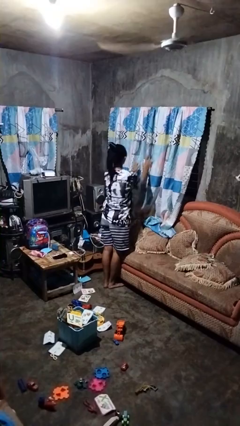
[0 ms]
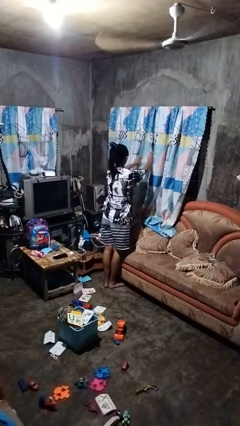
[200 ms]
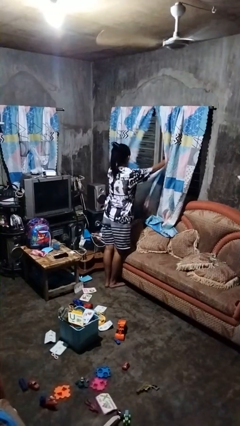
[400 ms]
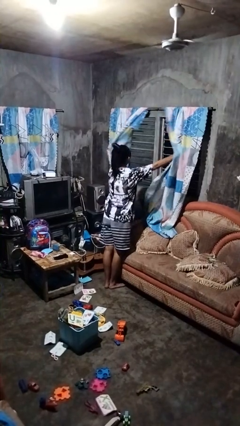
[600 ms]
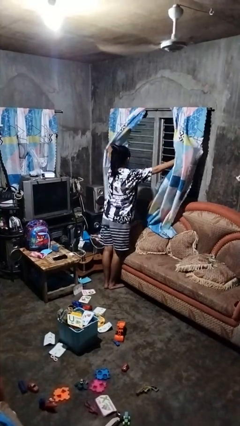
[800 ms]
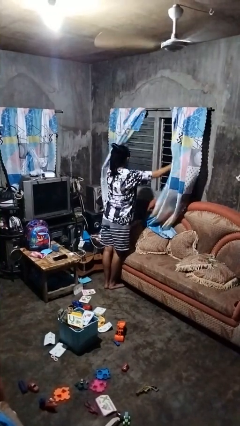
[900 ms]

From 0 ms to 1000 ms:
person opens curtains

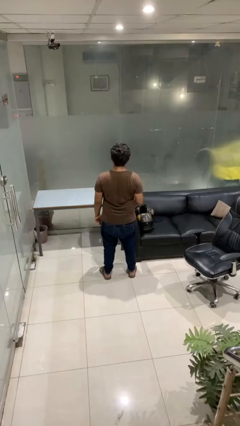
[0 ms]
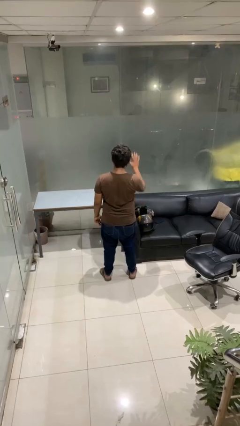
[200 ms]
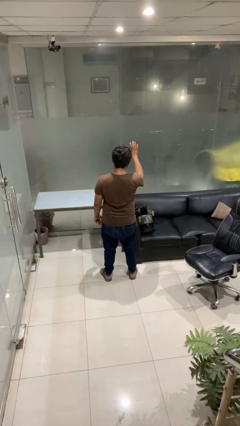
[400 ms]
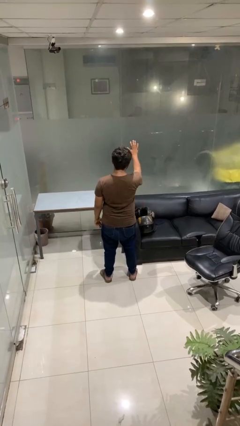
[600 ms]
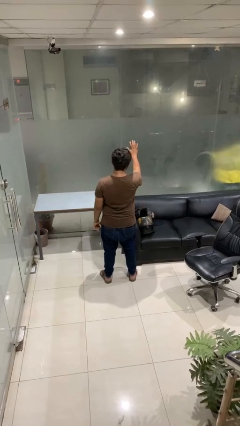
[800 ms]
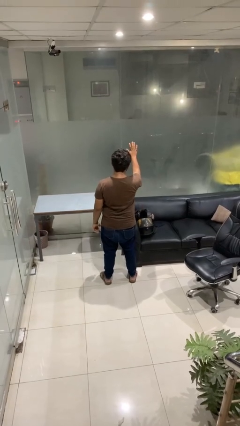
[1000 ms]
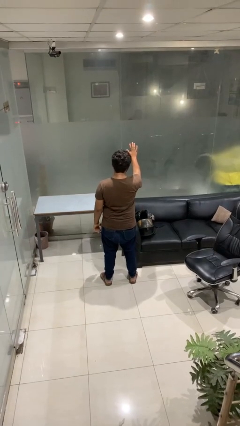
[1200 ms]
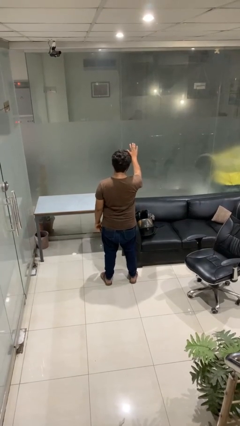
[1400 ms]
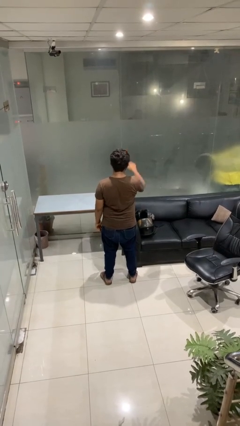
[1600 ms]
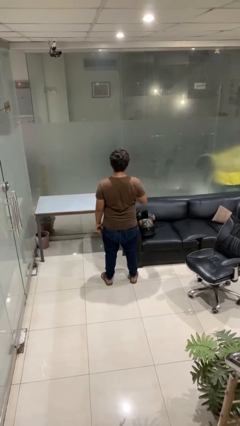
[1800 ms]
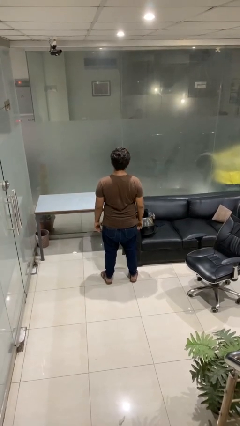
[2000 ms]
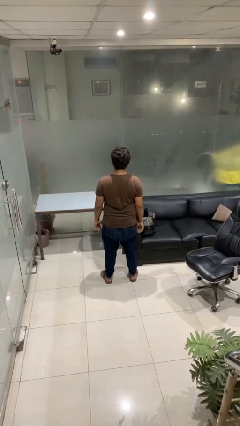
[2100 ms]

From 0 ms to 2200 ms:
person gestures stop

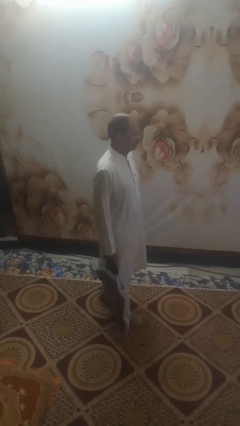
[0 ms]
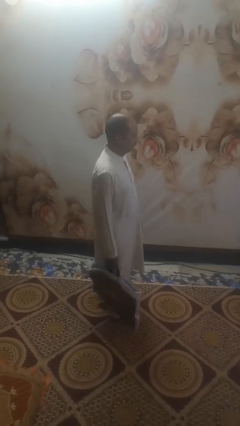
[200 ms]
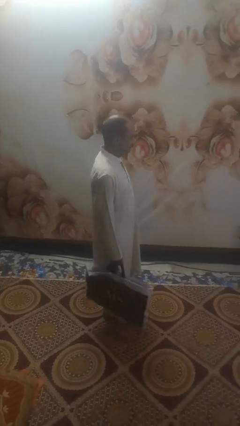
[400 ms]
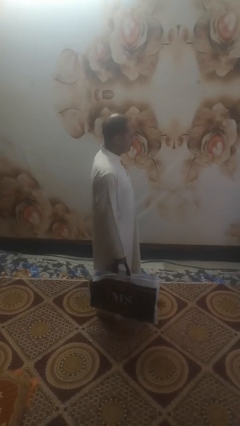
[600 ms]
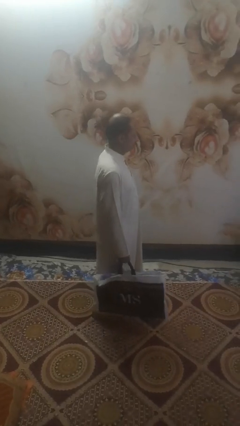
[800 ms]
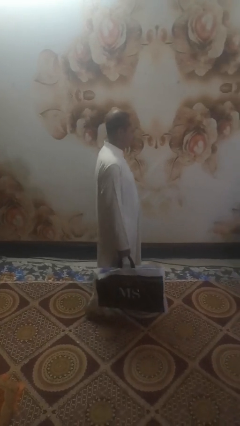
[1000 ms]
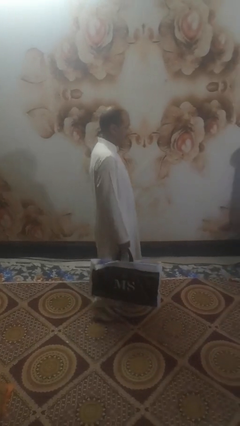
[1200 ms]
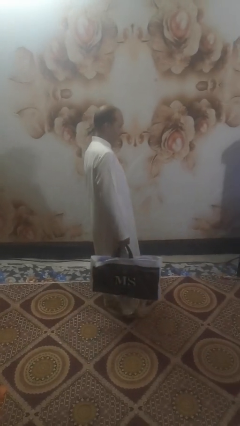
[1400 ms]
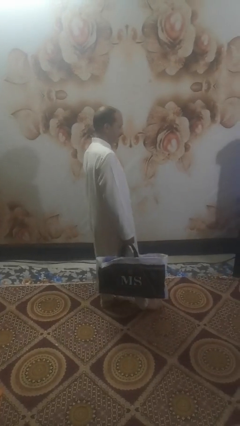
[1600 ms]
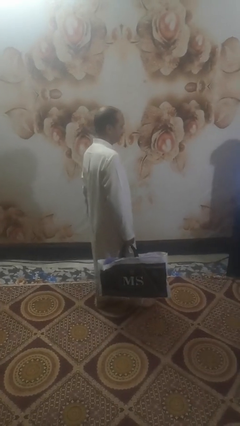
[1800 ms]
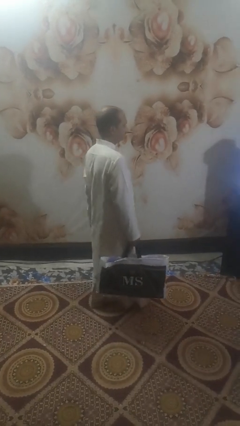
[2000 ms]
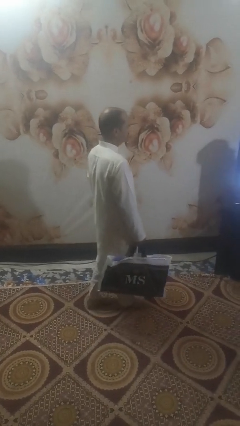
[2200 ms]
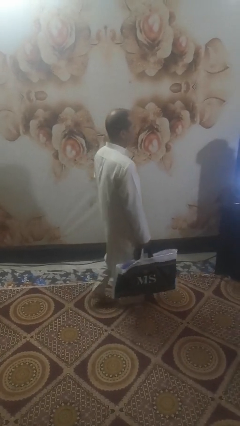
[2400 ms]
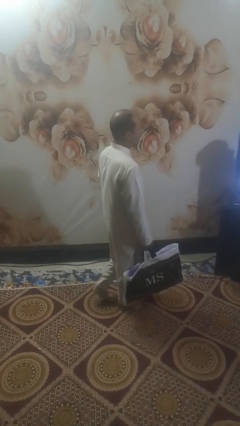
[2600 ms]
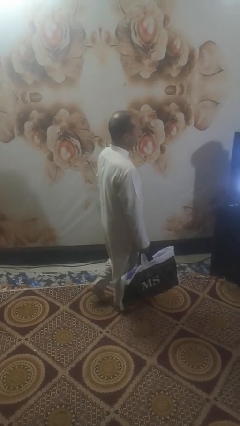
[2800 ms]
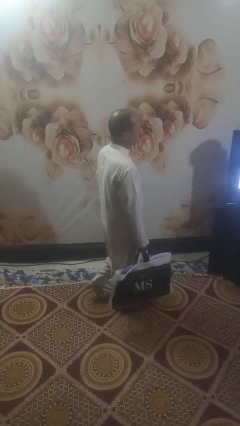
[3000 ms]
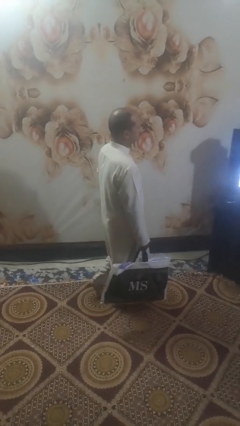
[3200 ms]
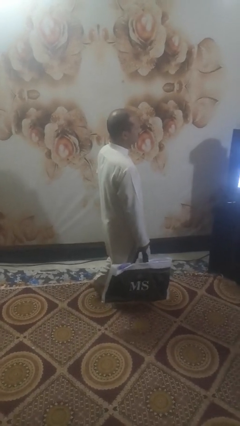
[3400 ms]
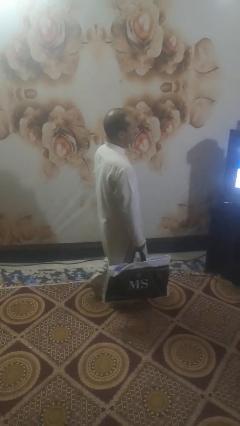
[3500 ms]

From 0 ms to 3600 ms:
person carries groceries

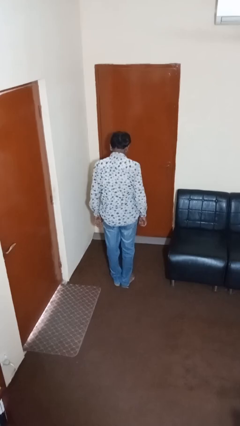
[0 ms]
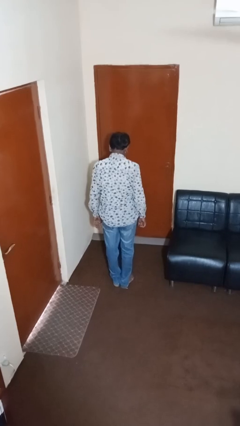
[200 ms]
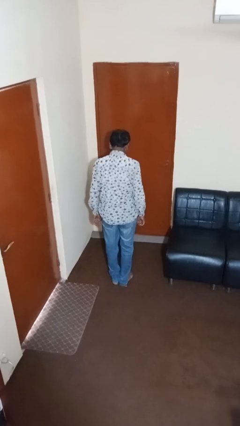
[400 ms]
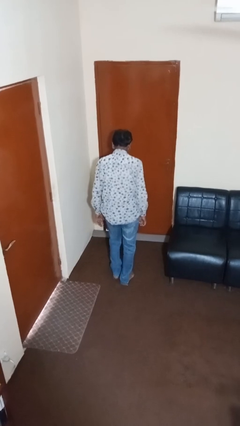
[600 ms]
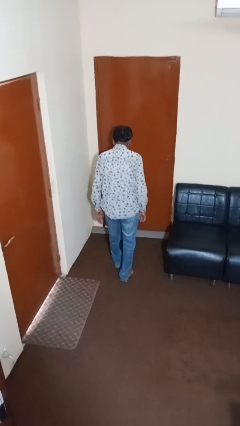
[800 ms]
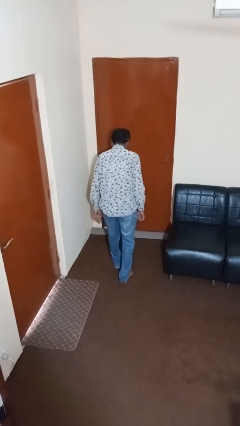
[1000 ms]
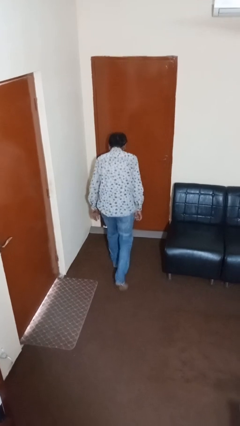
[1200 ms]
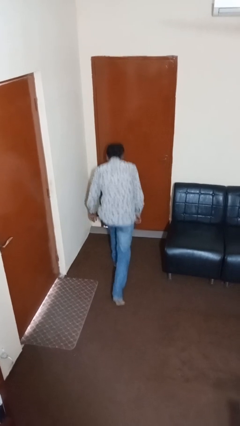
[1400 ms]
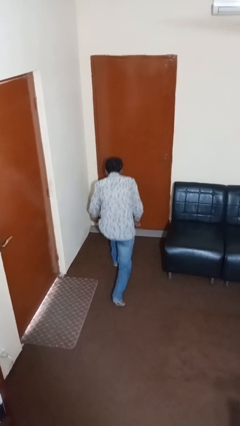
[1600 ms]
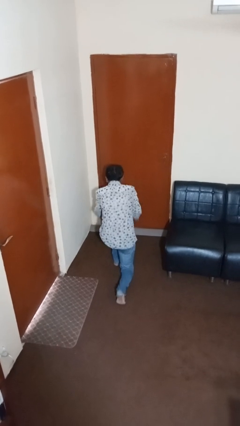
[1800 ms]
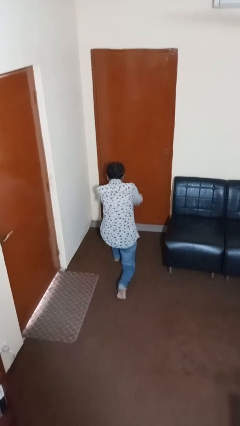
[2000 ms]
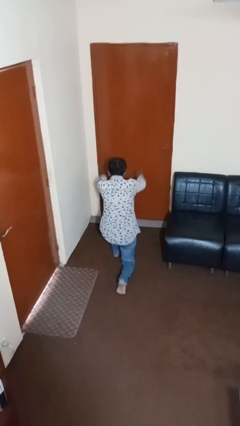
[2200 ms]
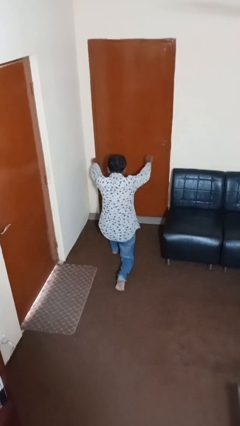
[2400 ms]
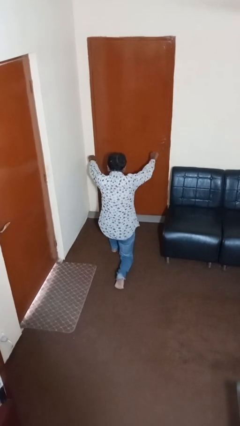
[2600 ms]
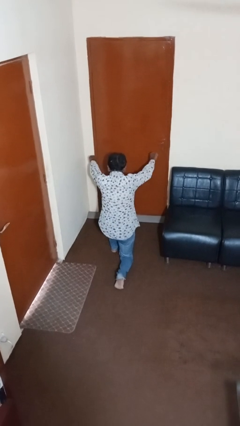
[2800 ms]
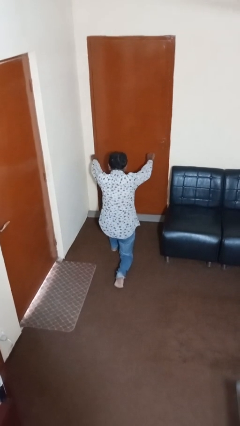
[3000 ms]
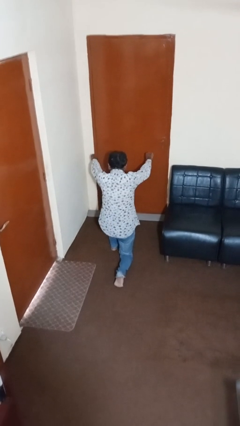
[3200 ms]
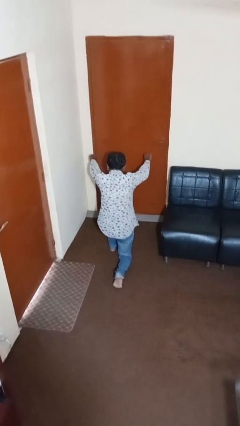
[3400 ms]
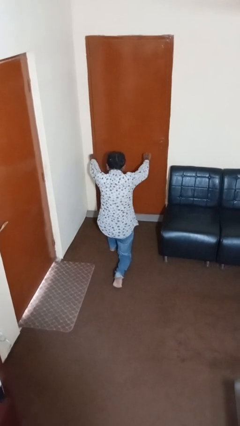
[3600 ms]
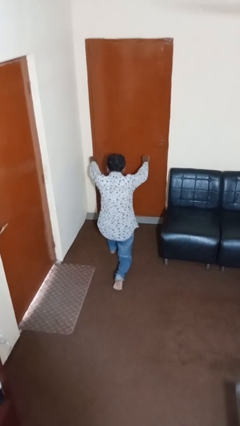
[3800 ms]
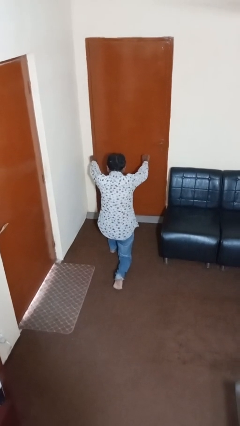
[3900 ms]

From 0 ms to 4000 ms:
person exercises with lunges

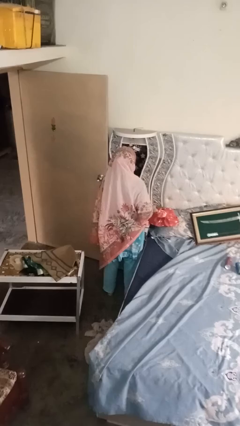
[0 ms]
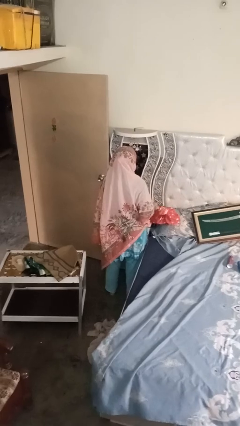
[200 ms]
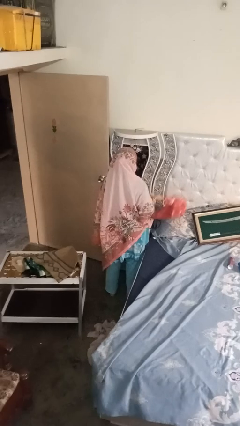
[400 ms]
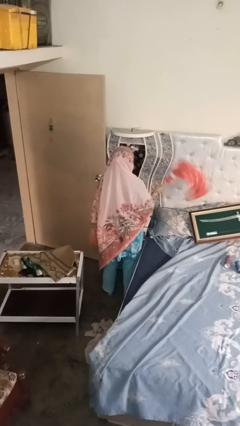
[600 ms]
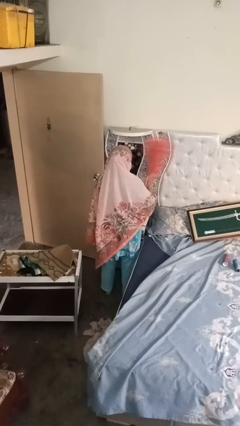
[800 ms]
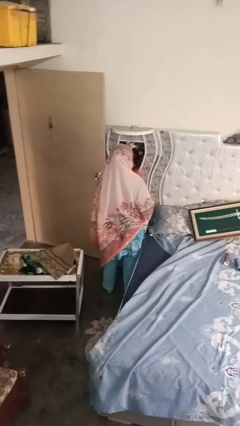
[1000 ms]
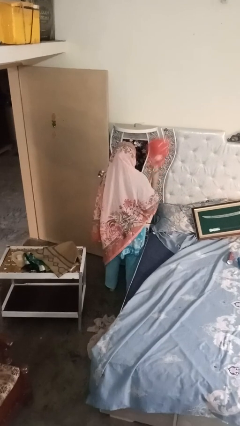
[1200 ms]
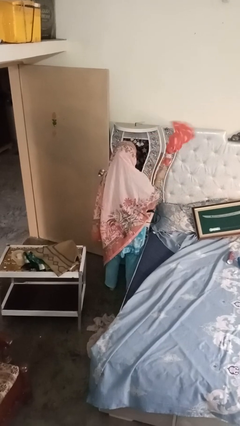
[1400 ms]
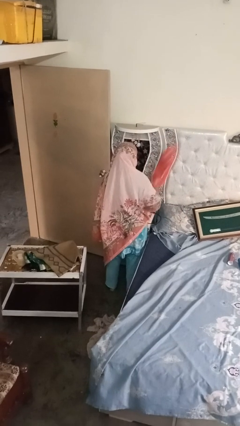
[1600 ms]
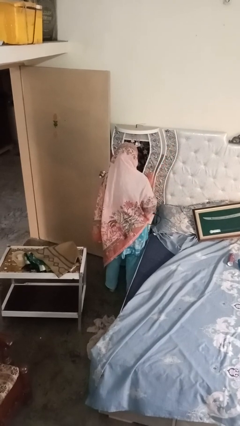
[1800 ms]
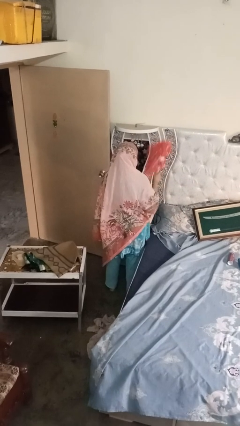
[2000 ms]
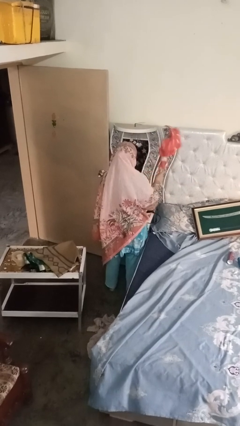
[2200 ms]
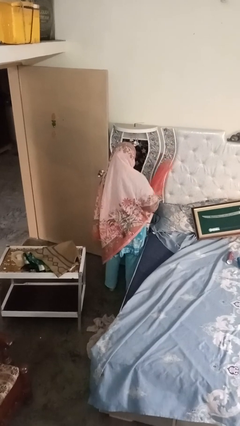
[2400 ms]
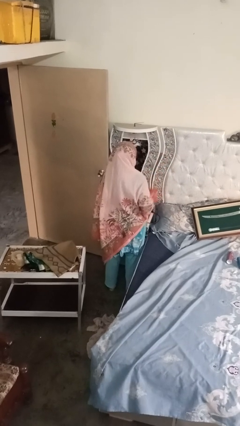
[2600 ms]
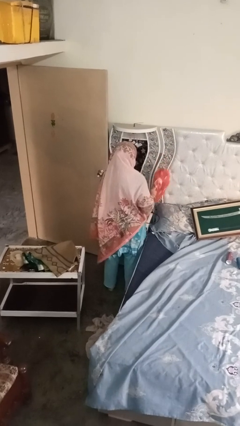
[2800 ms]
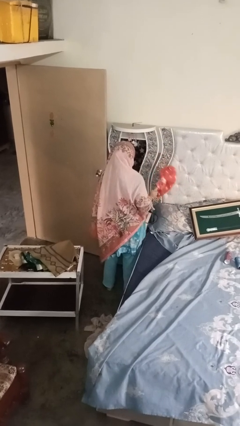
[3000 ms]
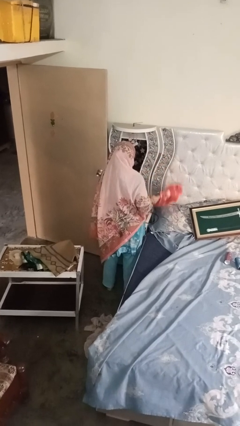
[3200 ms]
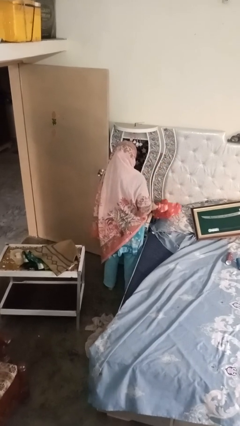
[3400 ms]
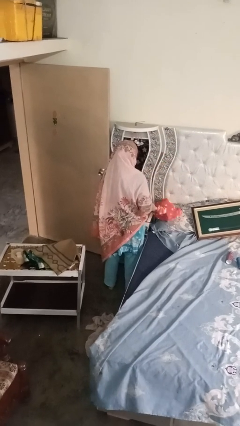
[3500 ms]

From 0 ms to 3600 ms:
person dusts furniture

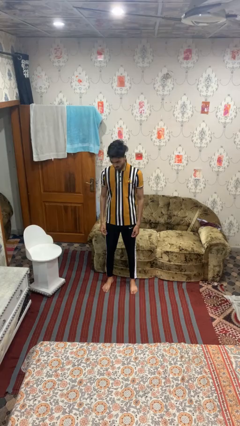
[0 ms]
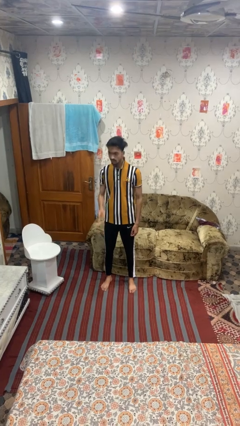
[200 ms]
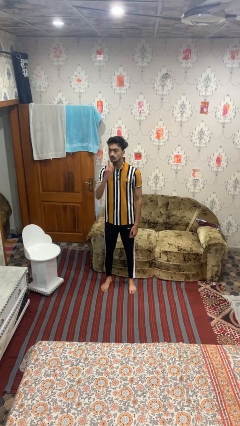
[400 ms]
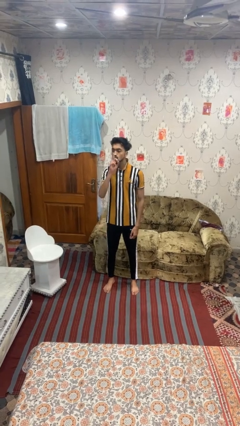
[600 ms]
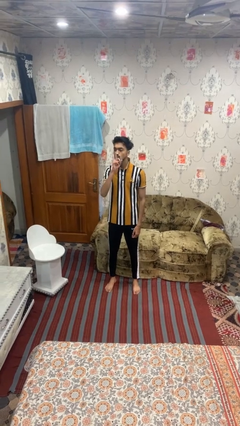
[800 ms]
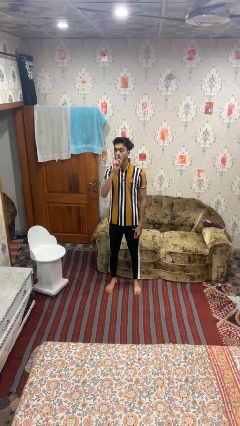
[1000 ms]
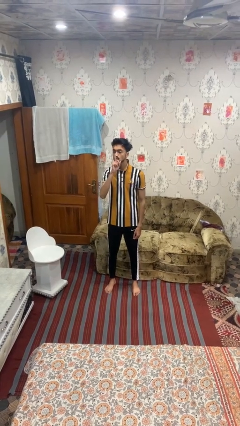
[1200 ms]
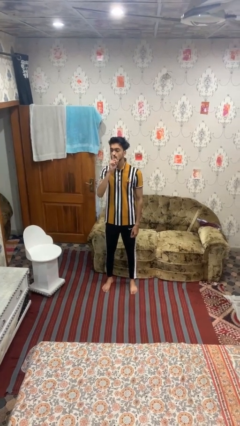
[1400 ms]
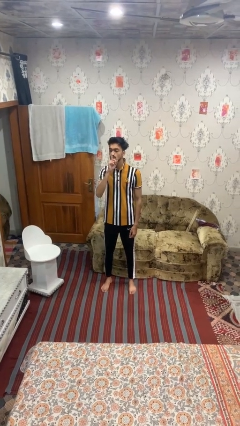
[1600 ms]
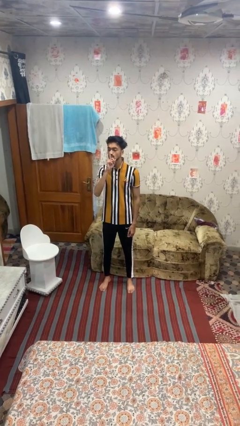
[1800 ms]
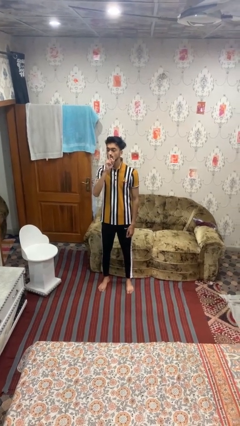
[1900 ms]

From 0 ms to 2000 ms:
person gestures be quiet

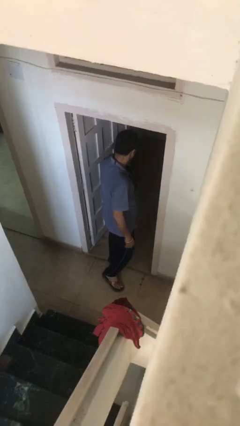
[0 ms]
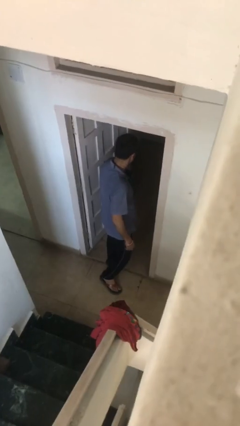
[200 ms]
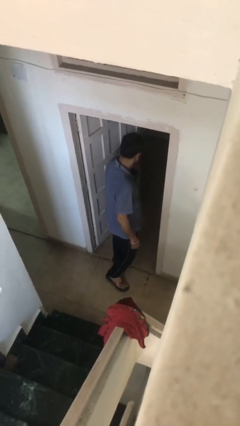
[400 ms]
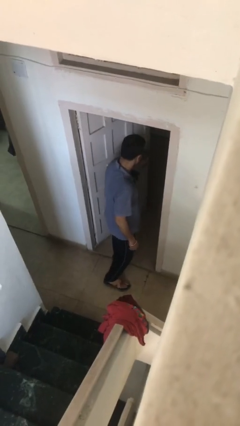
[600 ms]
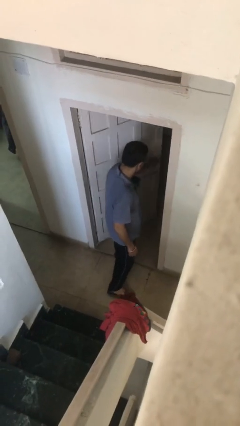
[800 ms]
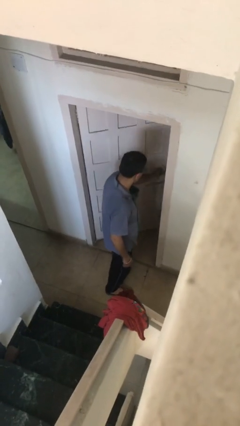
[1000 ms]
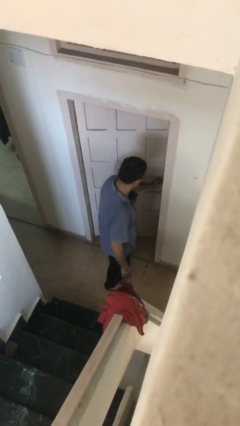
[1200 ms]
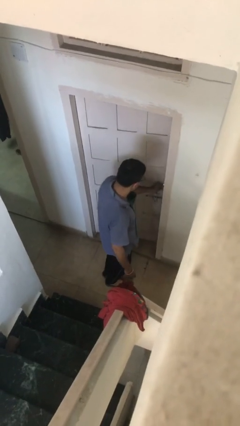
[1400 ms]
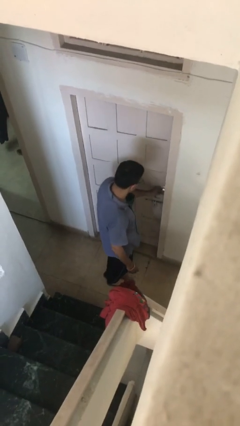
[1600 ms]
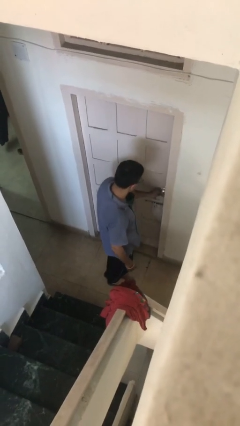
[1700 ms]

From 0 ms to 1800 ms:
person closes facility door
